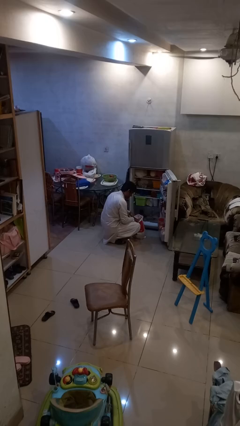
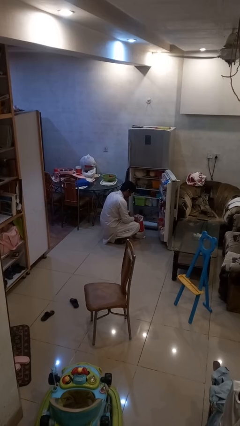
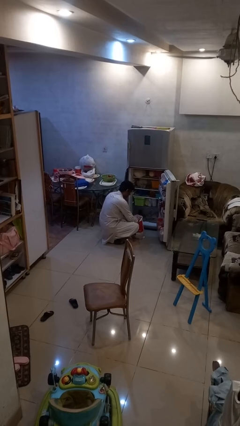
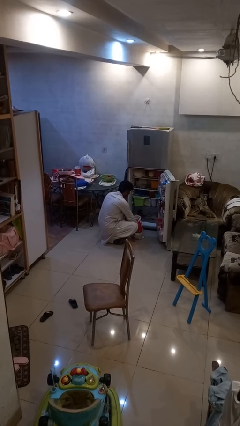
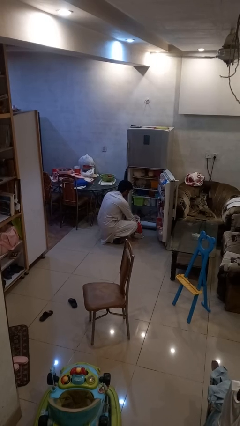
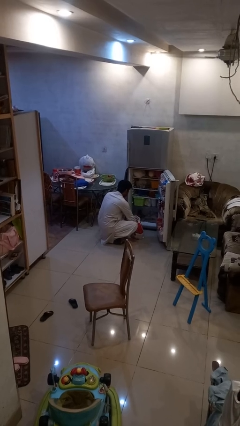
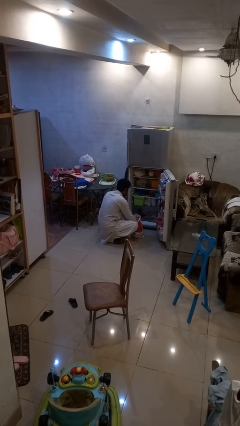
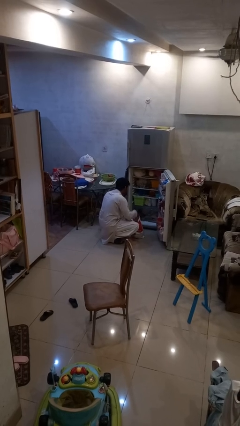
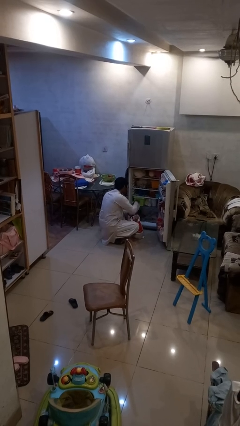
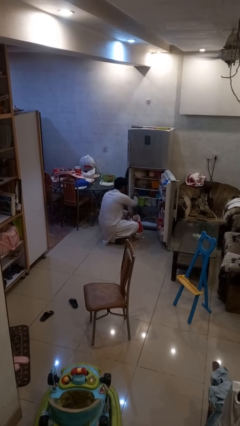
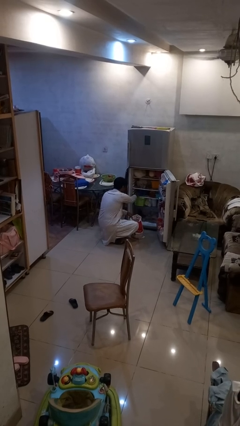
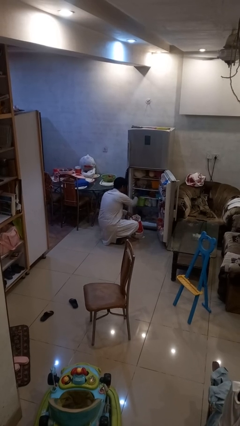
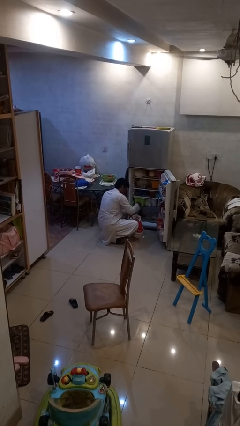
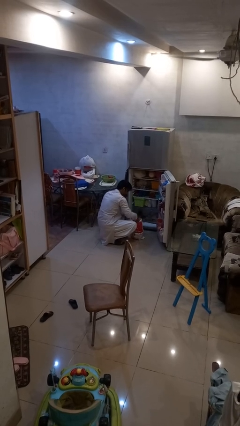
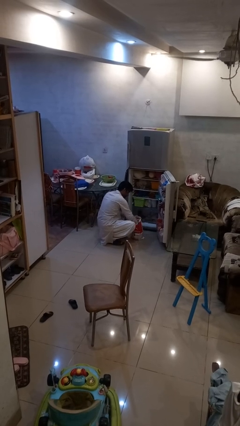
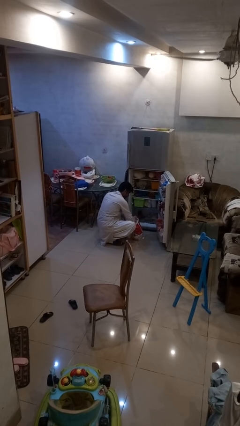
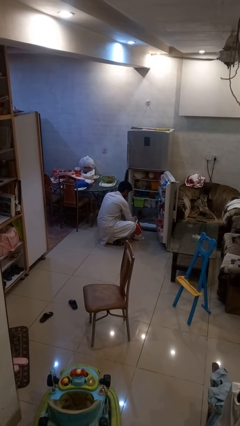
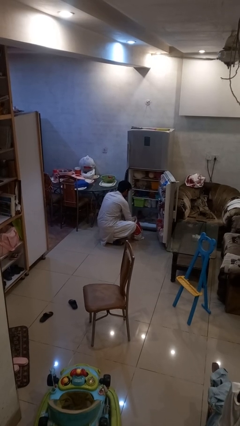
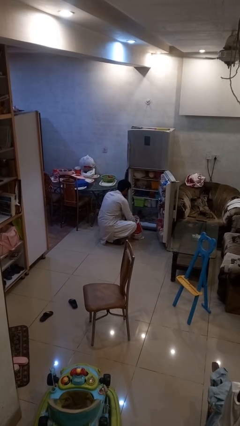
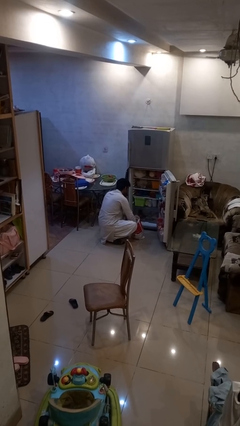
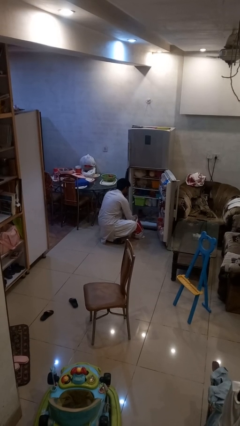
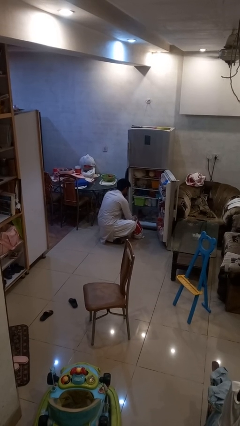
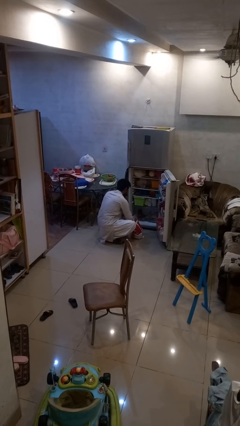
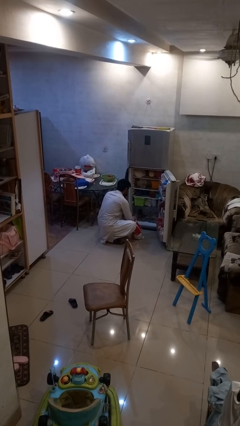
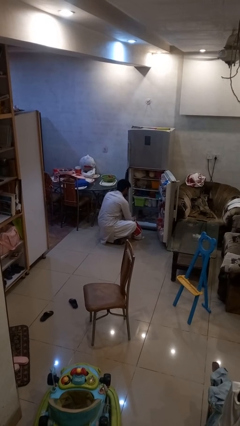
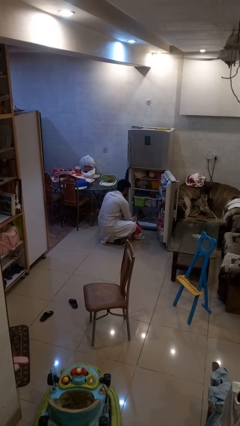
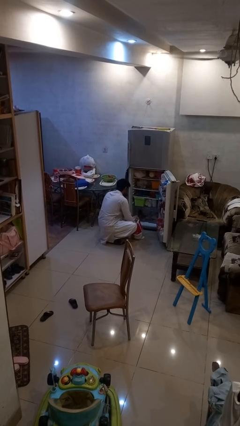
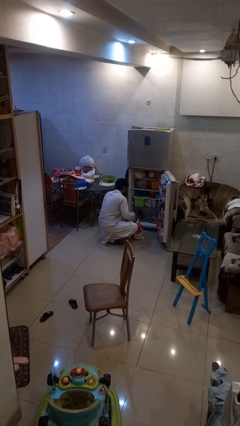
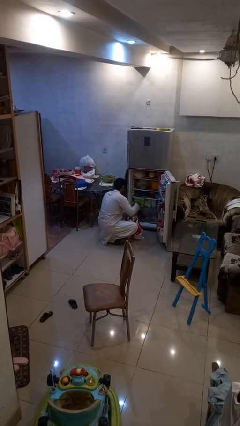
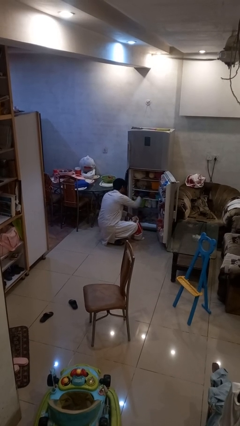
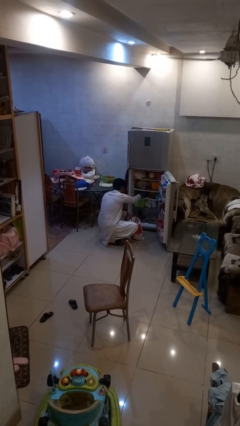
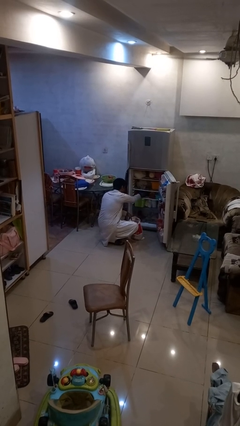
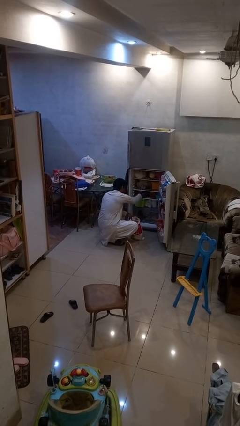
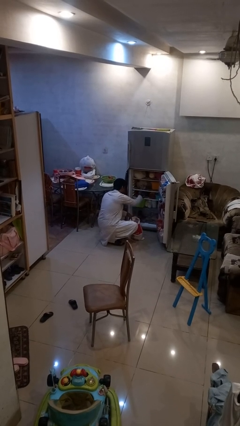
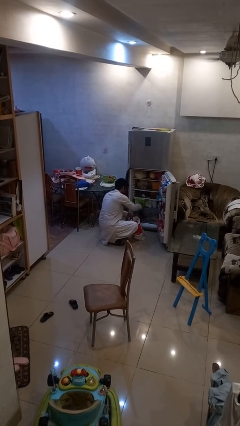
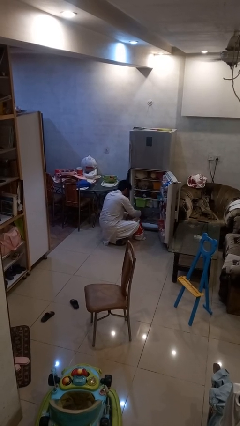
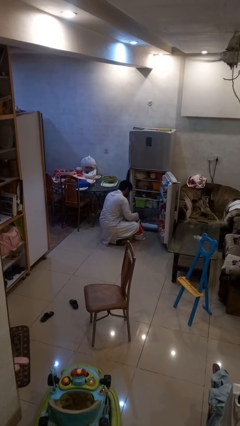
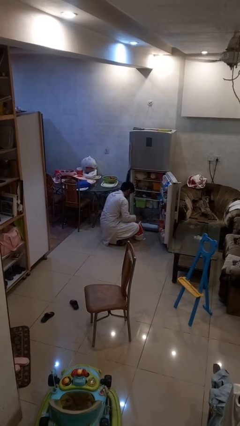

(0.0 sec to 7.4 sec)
person loads groceries into refrigerator

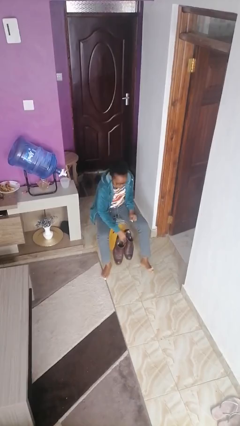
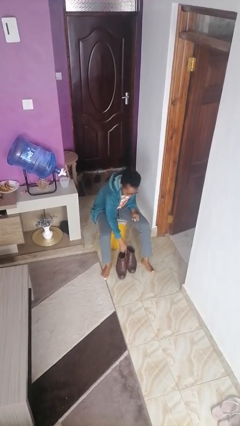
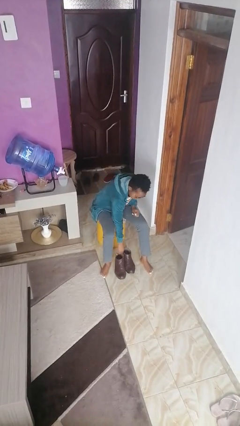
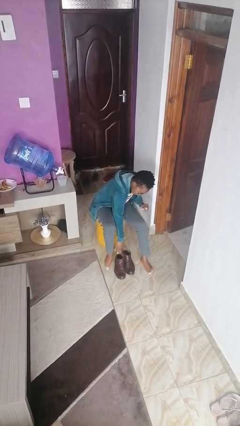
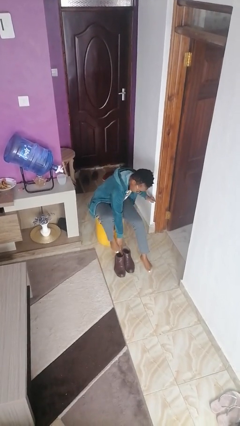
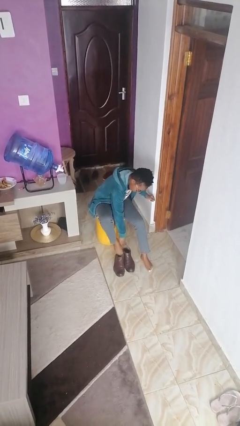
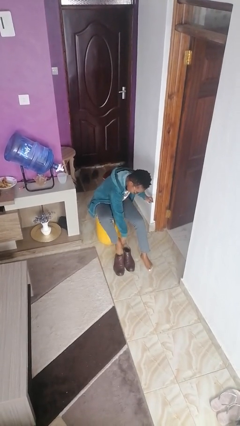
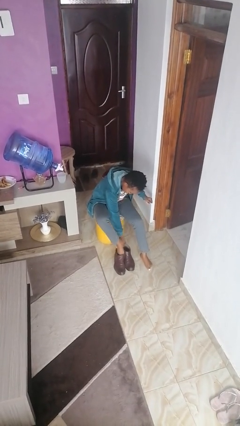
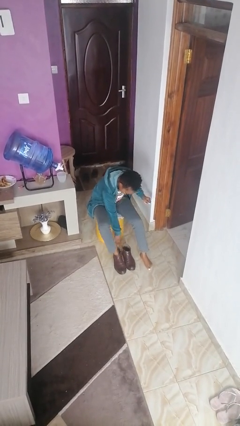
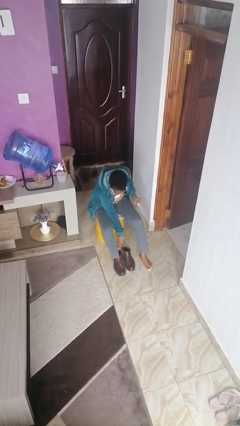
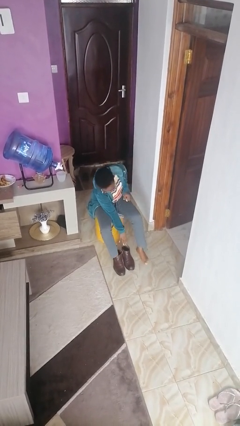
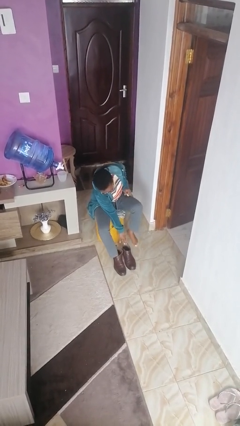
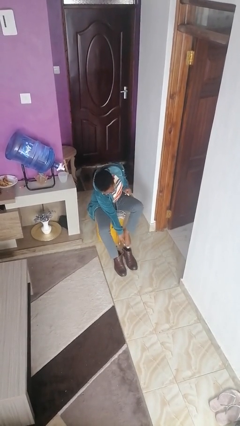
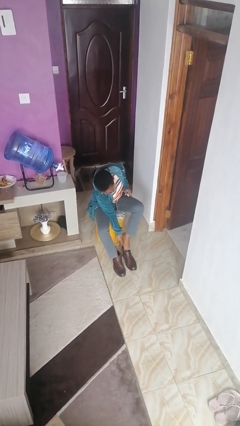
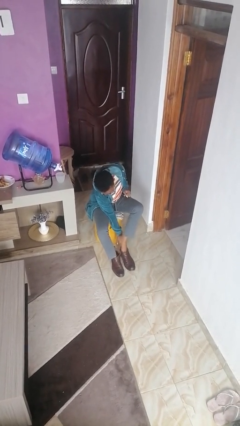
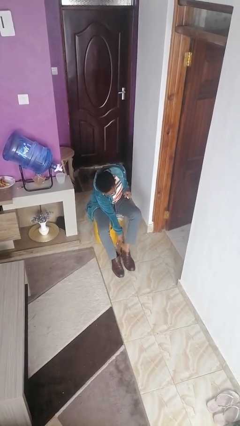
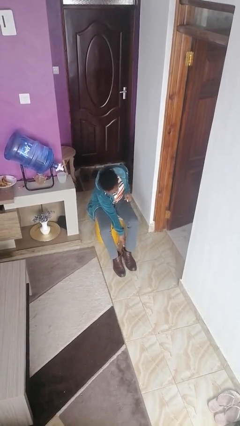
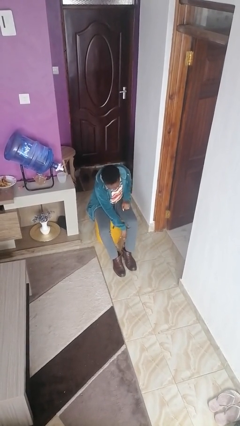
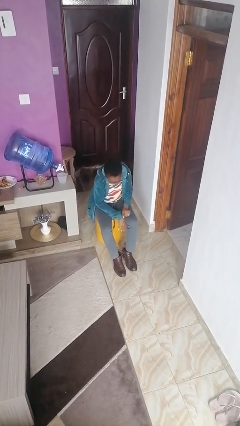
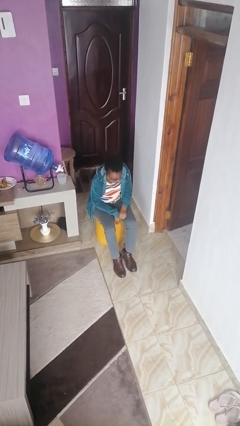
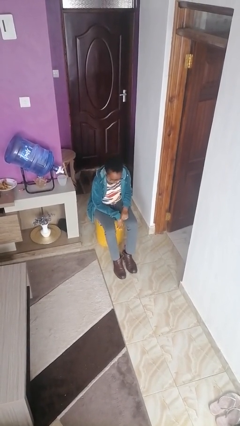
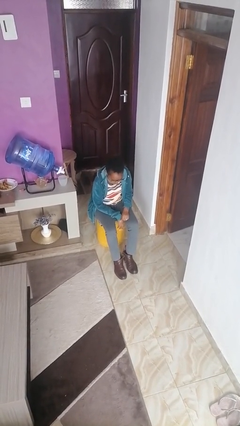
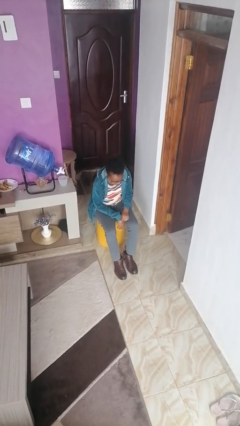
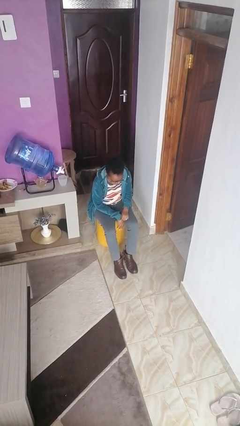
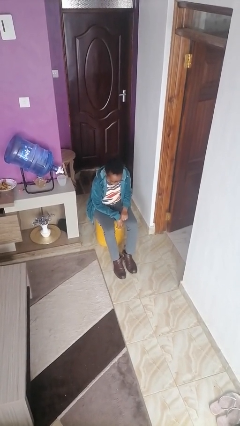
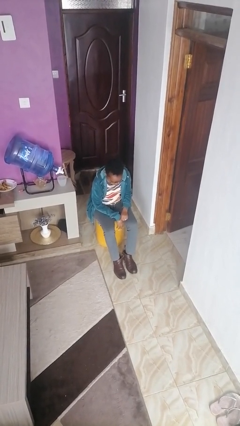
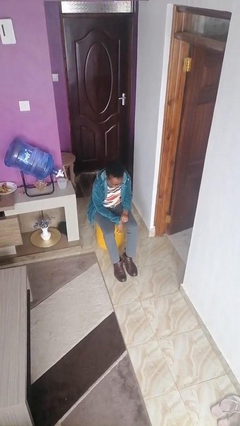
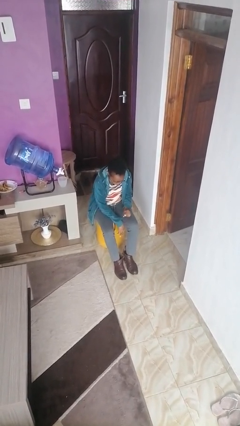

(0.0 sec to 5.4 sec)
person puts on boots

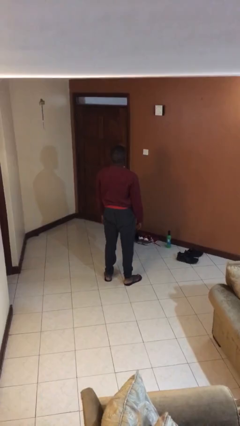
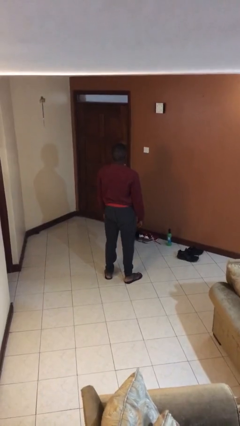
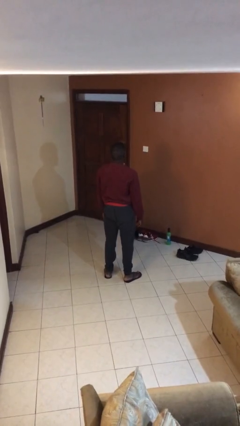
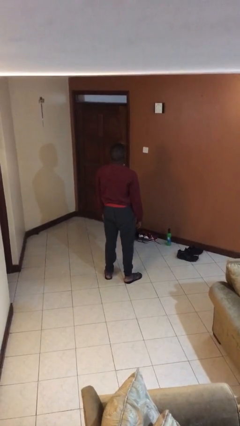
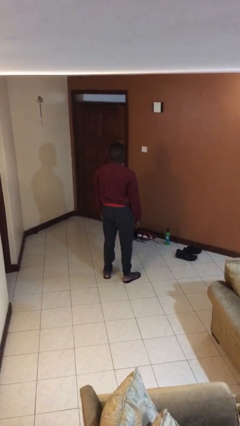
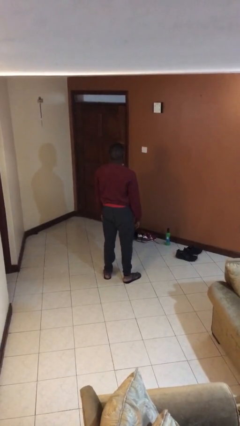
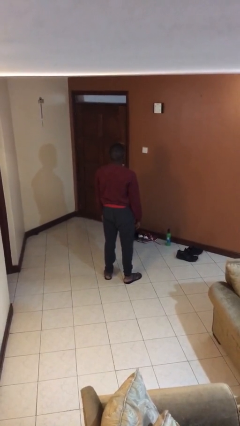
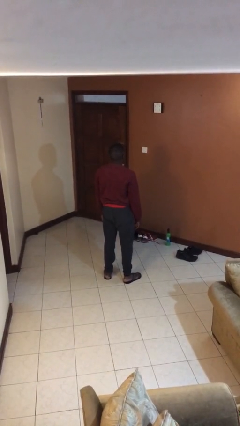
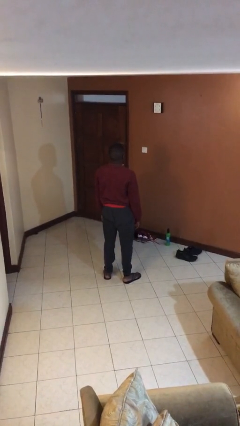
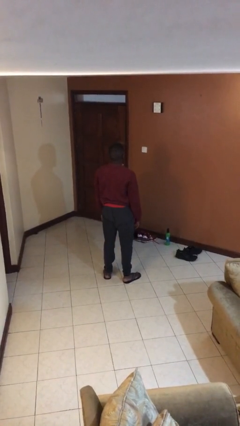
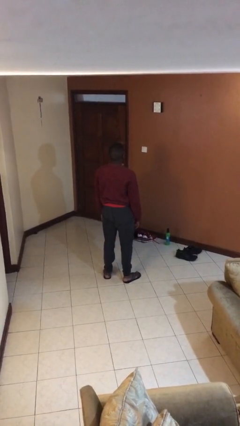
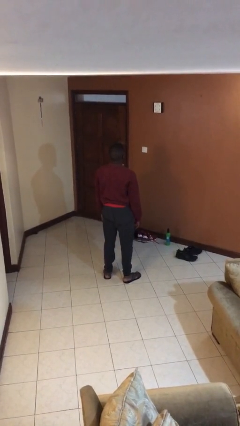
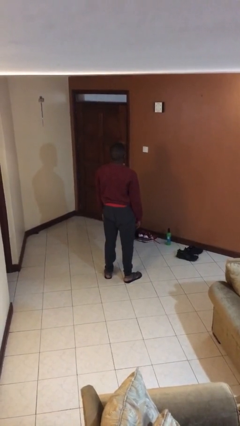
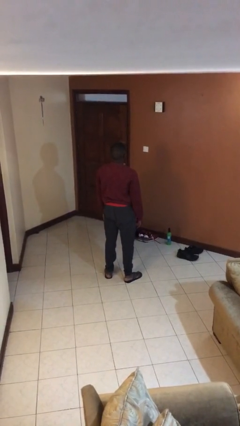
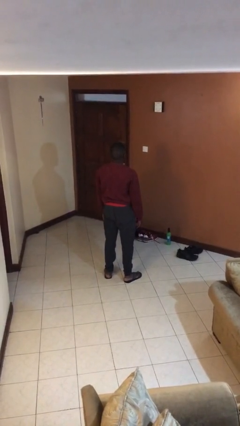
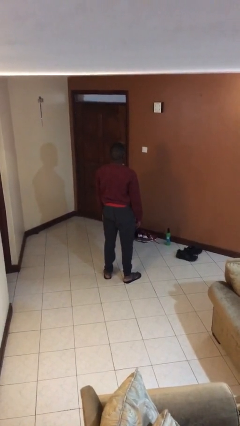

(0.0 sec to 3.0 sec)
person gestures swipe up

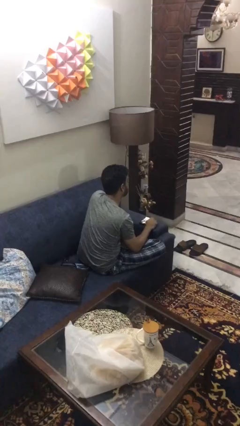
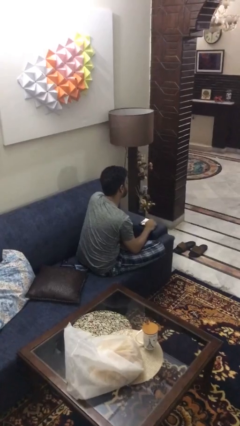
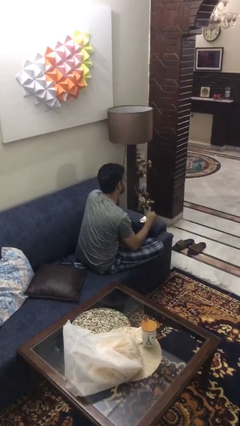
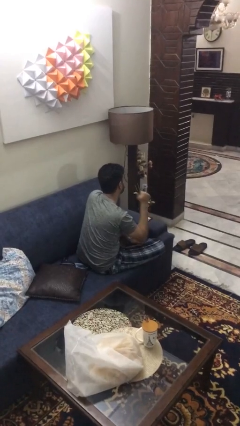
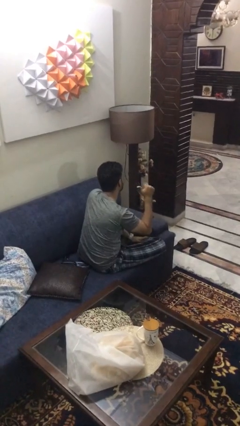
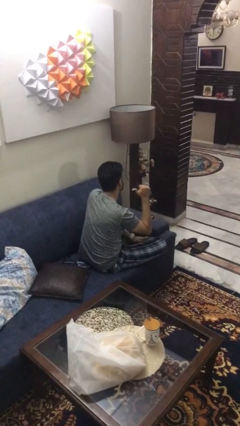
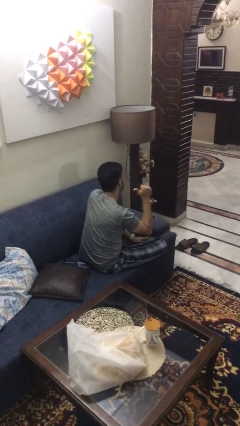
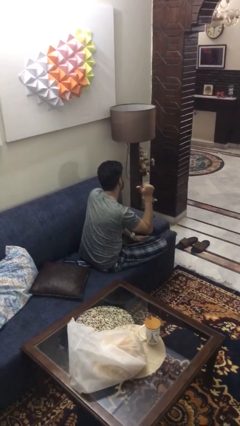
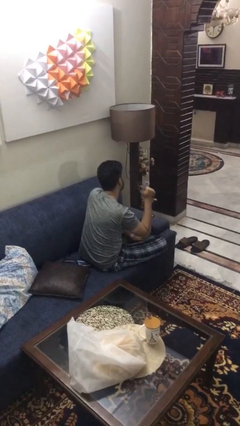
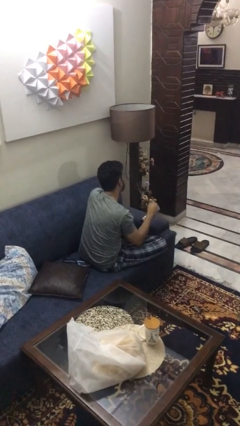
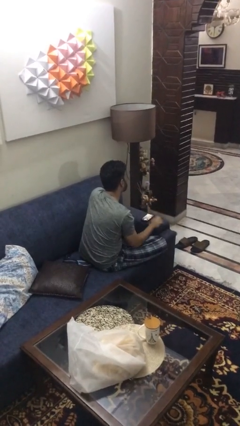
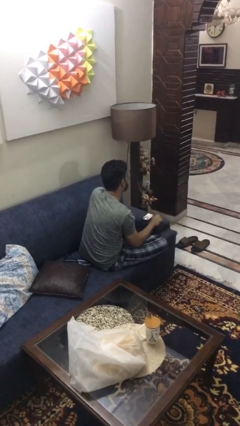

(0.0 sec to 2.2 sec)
person gestures behind me
